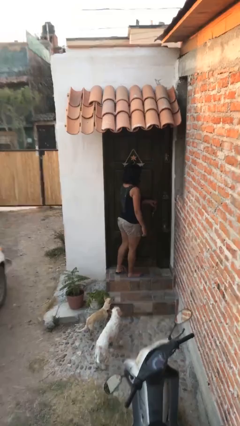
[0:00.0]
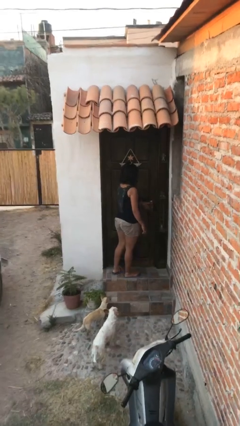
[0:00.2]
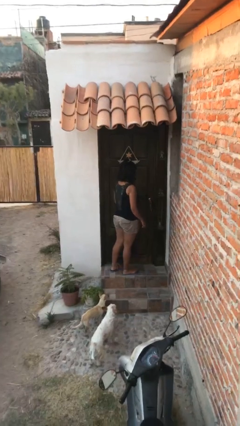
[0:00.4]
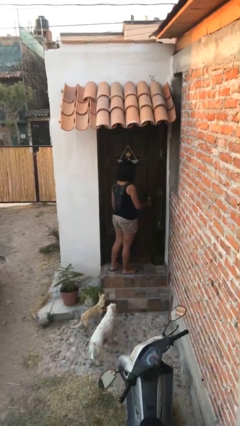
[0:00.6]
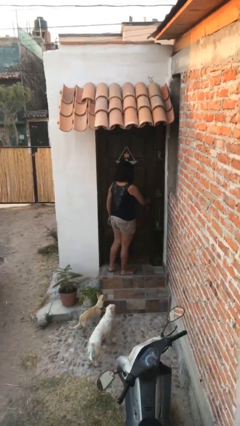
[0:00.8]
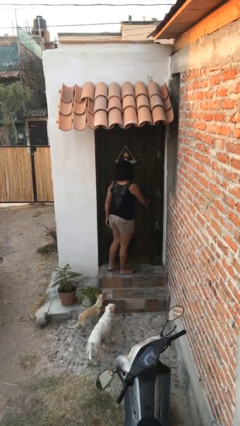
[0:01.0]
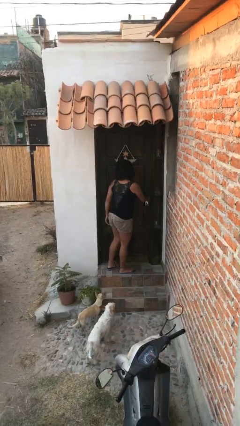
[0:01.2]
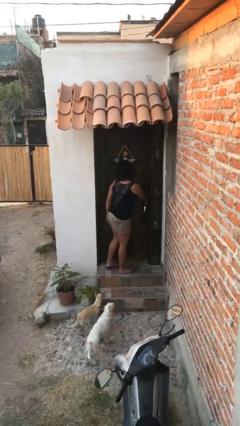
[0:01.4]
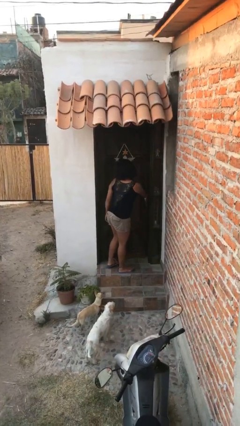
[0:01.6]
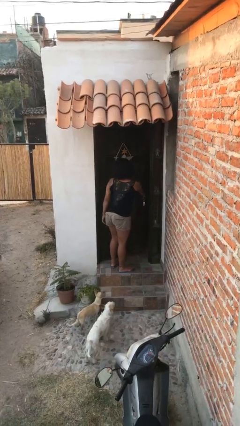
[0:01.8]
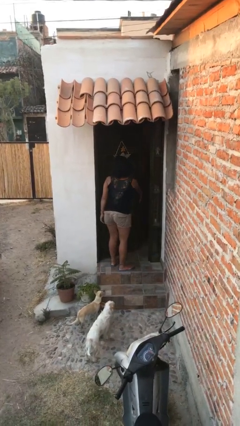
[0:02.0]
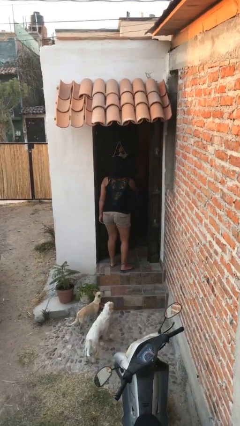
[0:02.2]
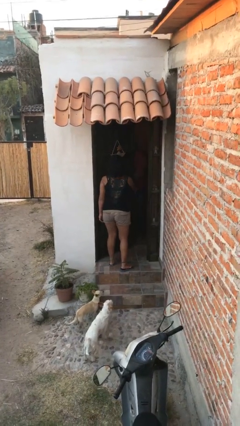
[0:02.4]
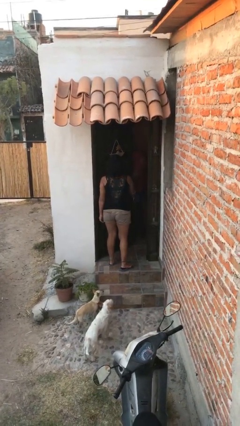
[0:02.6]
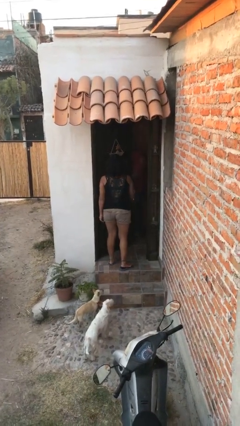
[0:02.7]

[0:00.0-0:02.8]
person opens facility door

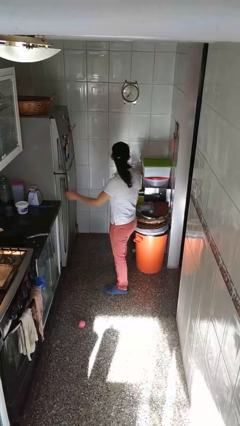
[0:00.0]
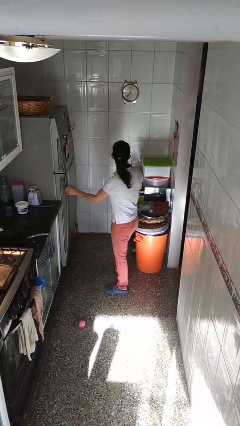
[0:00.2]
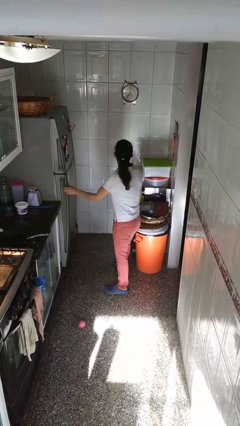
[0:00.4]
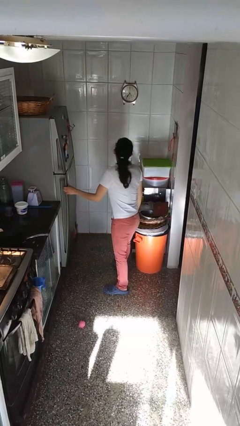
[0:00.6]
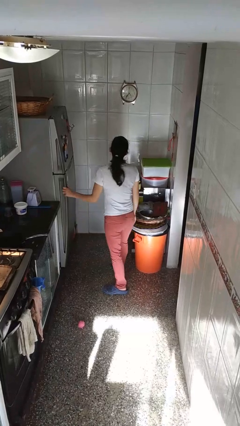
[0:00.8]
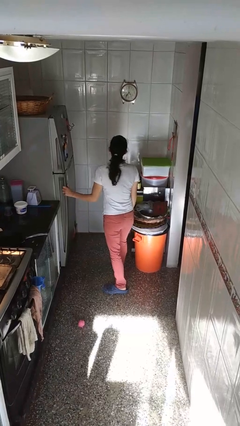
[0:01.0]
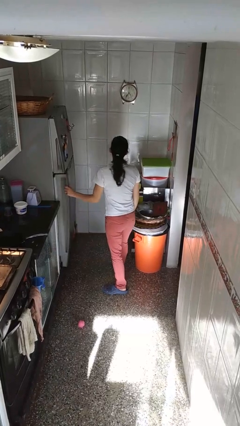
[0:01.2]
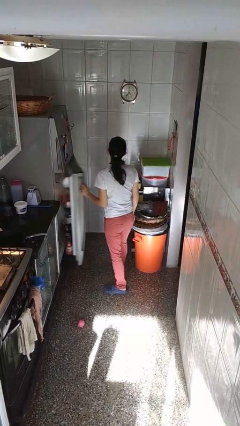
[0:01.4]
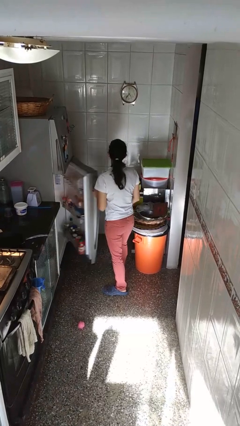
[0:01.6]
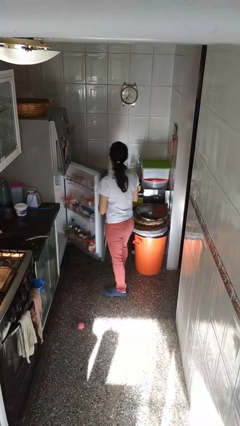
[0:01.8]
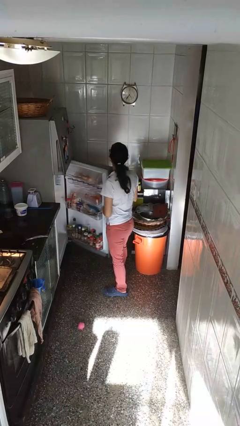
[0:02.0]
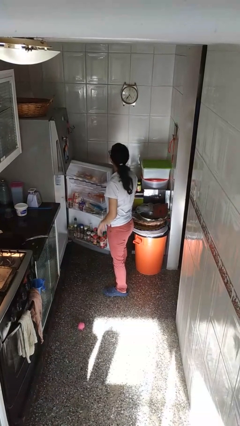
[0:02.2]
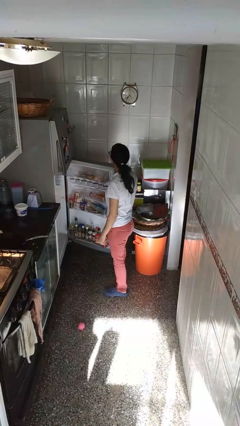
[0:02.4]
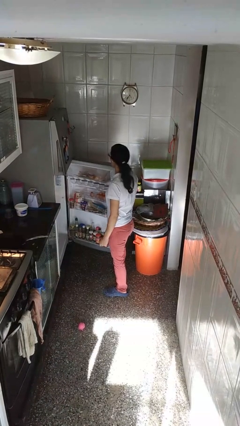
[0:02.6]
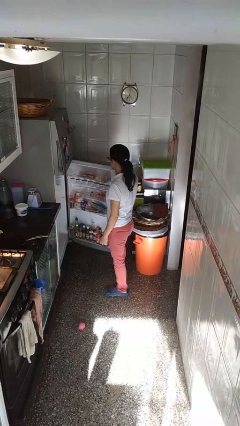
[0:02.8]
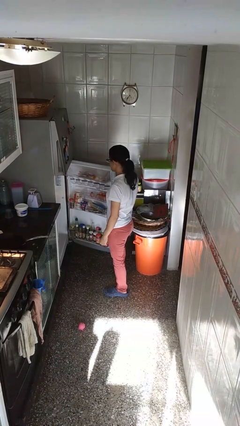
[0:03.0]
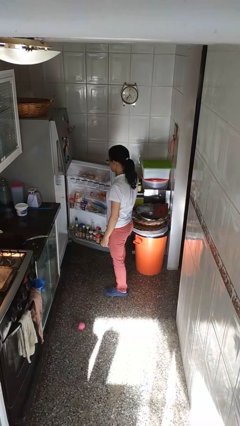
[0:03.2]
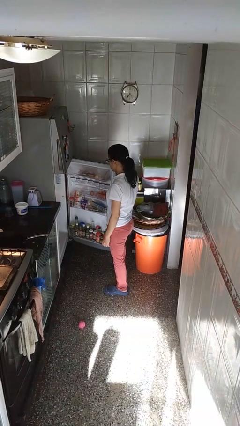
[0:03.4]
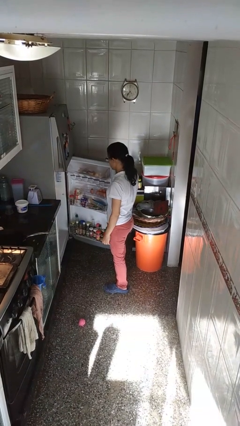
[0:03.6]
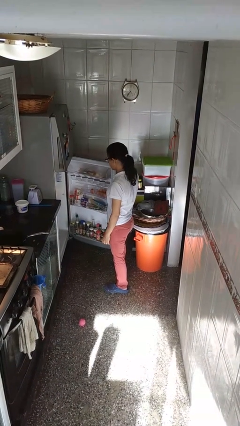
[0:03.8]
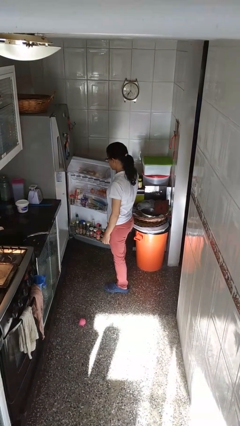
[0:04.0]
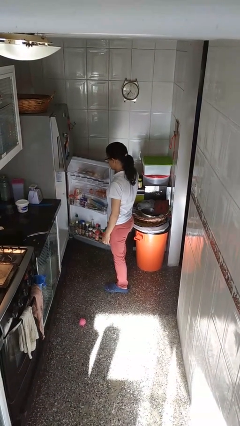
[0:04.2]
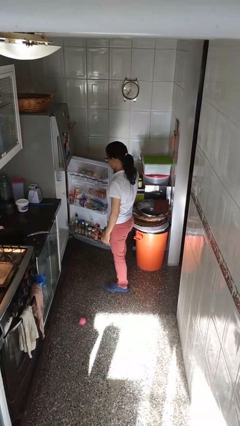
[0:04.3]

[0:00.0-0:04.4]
person opens refrigerator

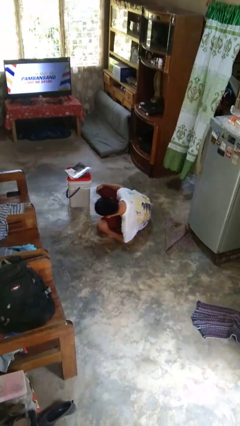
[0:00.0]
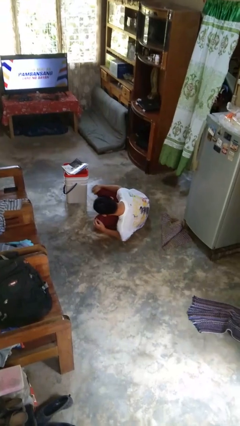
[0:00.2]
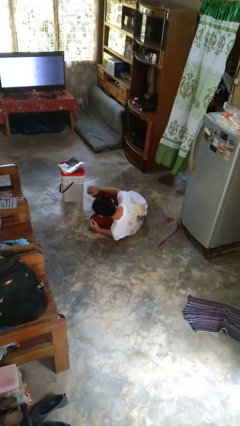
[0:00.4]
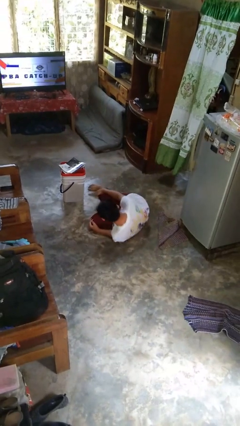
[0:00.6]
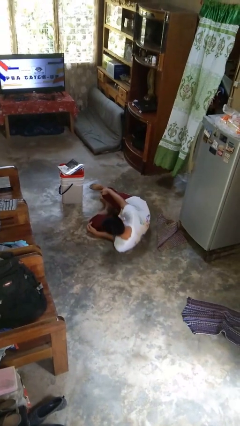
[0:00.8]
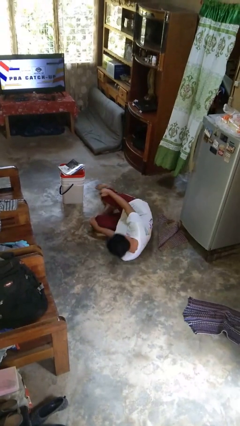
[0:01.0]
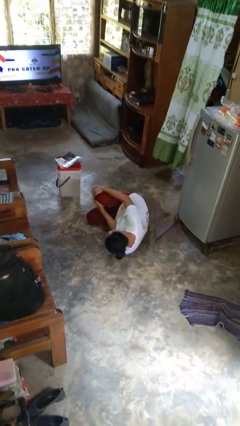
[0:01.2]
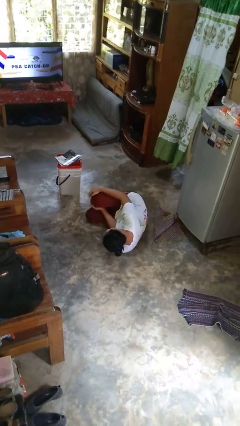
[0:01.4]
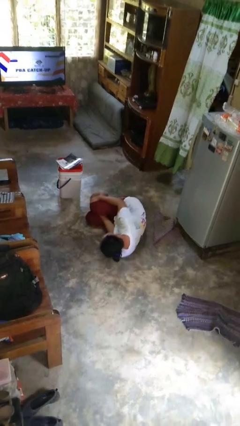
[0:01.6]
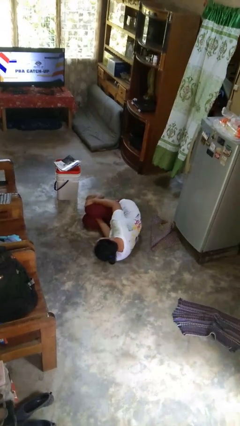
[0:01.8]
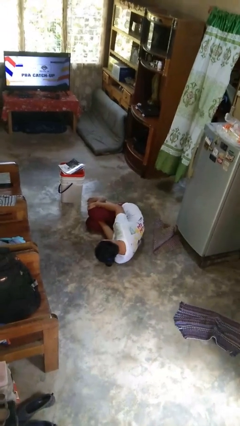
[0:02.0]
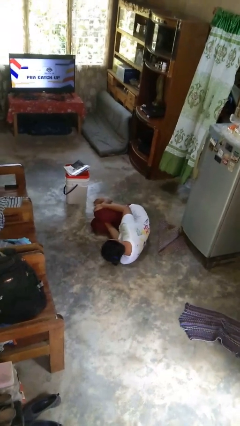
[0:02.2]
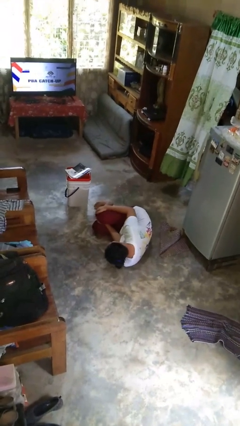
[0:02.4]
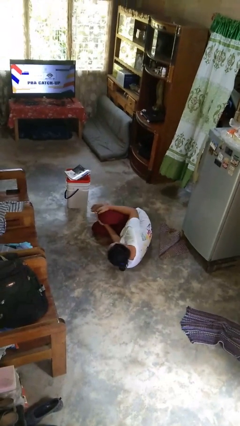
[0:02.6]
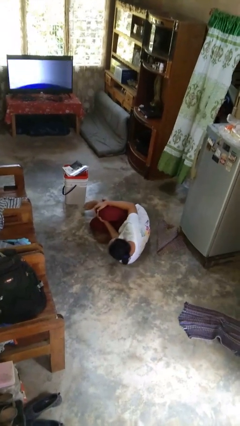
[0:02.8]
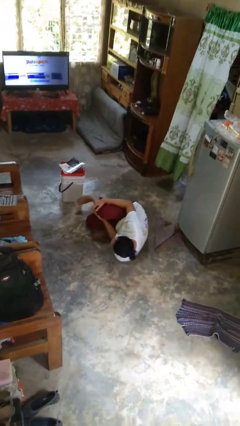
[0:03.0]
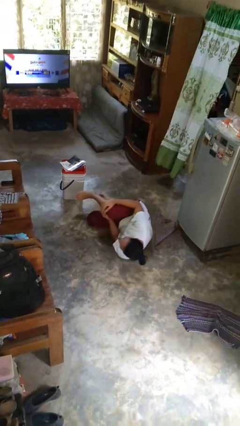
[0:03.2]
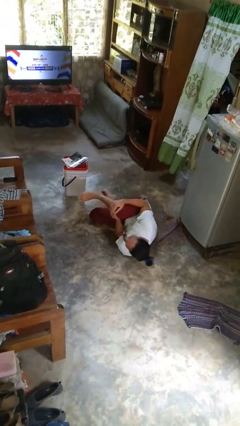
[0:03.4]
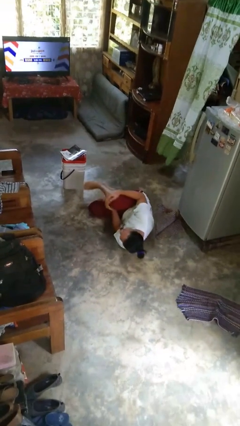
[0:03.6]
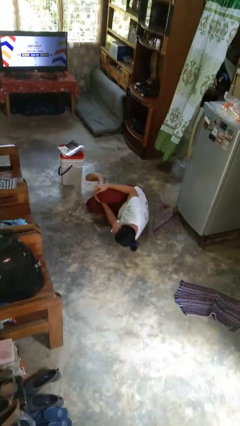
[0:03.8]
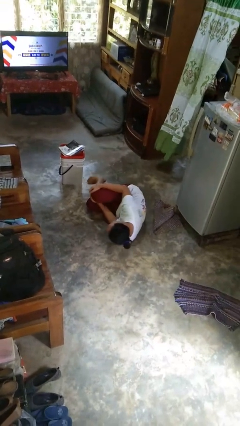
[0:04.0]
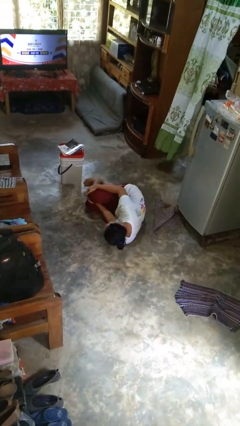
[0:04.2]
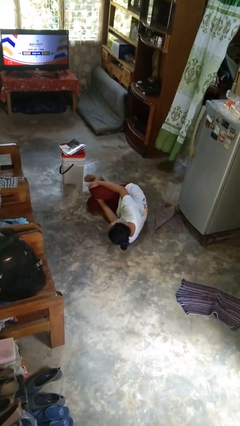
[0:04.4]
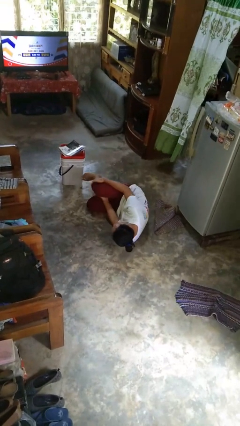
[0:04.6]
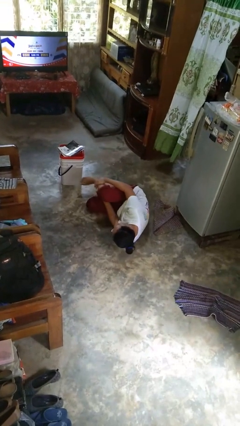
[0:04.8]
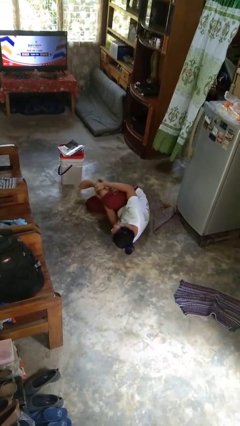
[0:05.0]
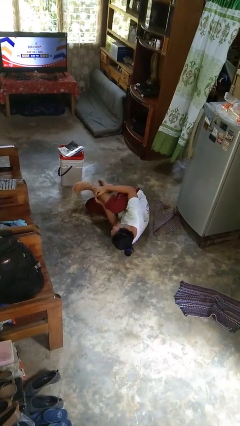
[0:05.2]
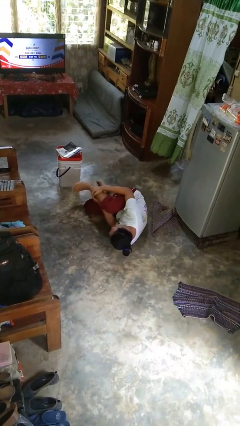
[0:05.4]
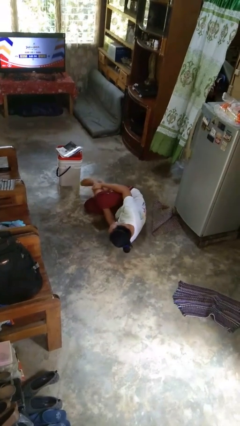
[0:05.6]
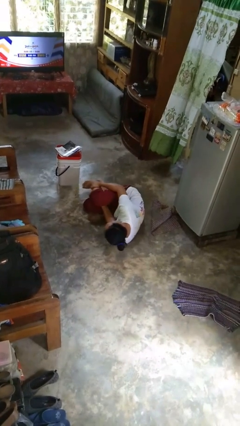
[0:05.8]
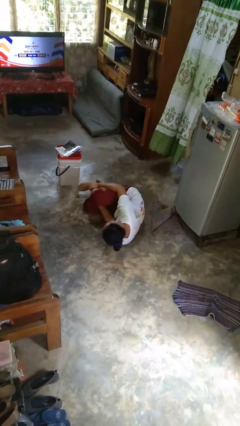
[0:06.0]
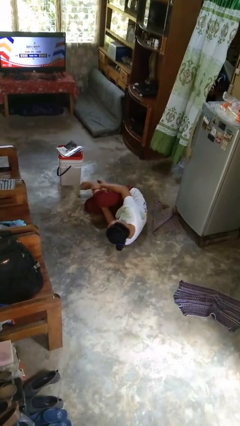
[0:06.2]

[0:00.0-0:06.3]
person lies down on floor

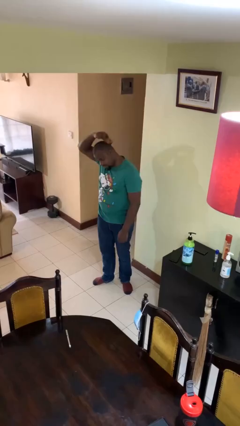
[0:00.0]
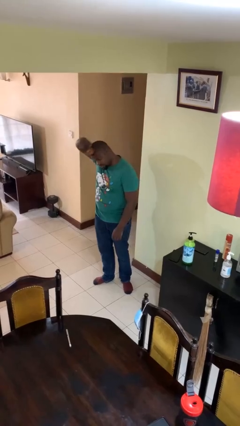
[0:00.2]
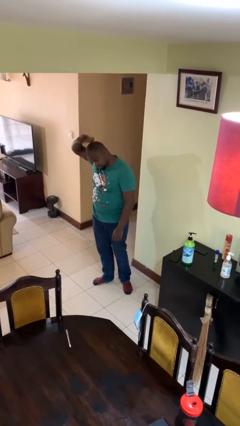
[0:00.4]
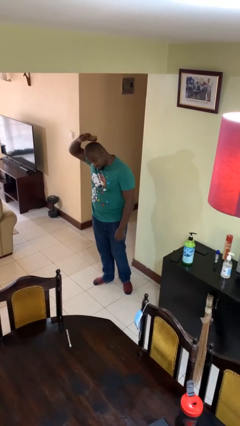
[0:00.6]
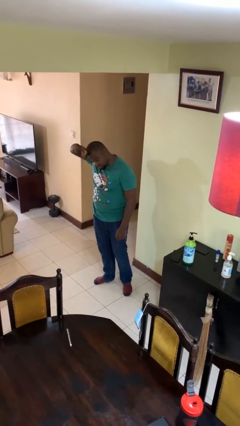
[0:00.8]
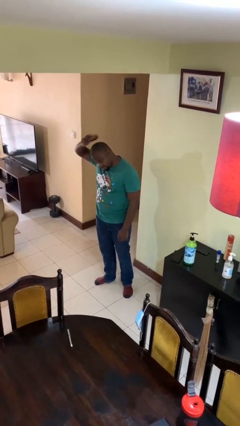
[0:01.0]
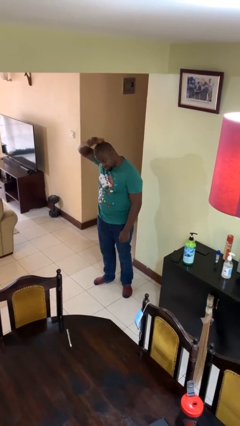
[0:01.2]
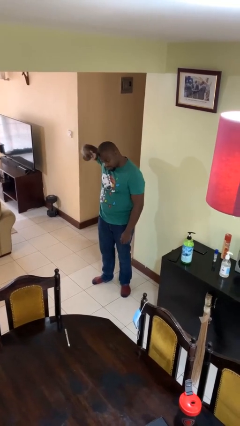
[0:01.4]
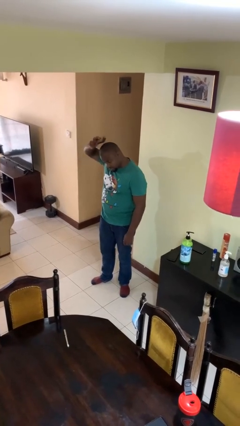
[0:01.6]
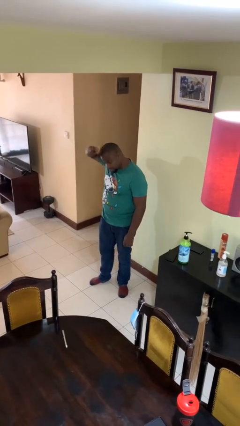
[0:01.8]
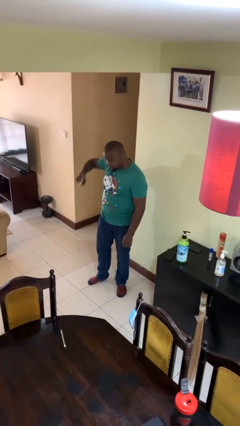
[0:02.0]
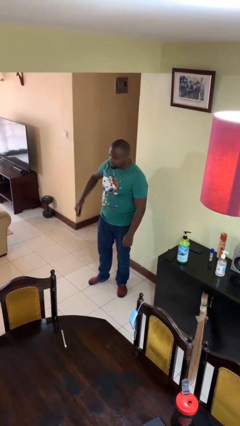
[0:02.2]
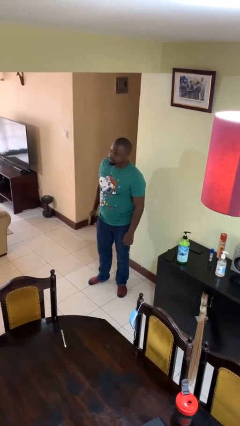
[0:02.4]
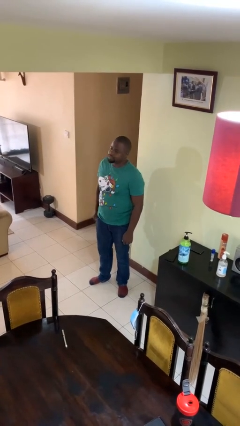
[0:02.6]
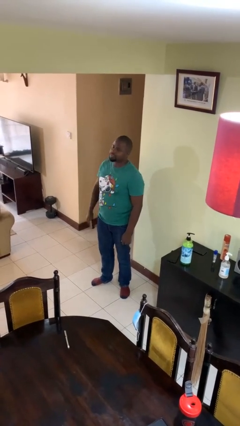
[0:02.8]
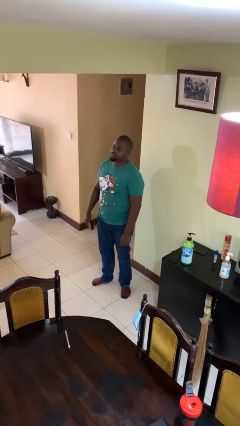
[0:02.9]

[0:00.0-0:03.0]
person brushes hair

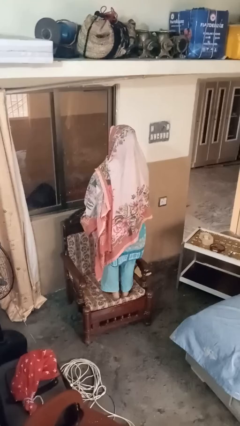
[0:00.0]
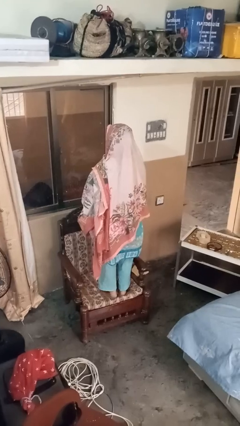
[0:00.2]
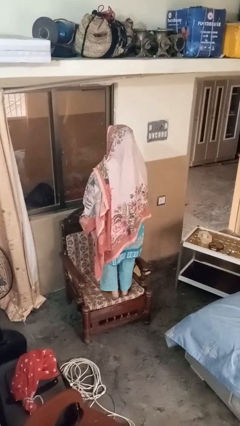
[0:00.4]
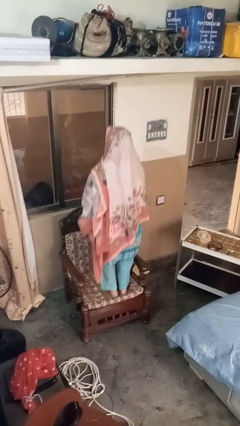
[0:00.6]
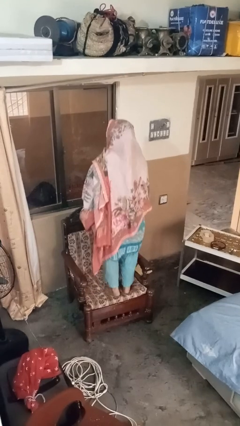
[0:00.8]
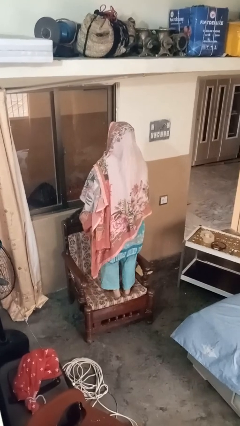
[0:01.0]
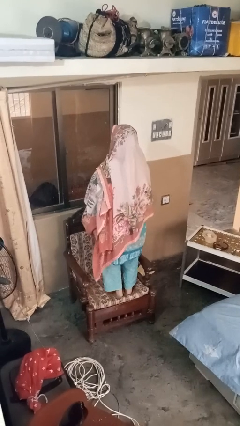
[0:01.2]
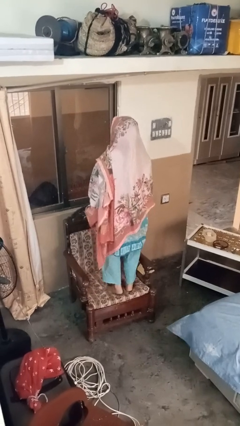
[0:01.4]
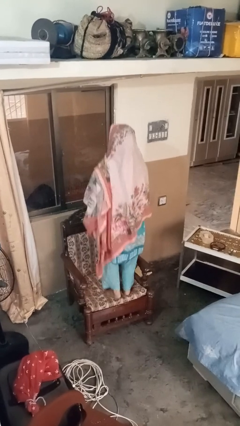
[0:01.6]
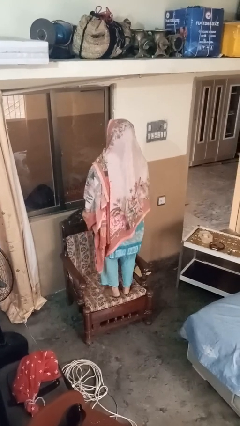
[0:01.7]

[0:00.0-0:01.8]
person jumps on couch
